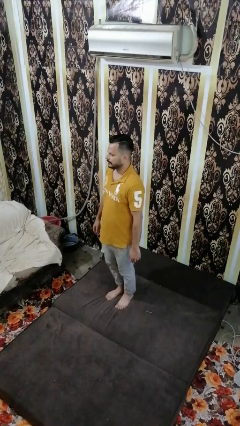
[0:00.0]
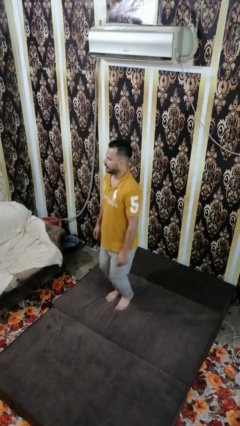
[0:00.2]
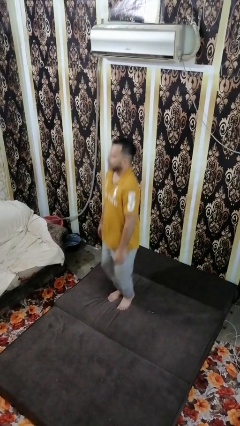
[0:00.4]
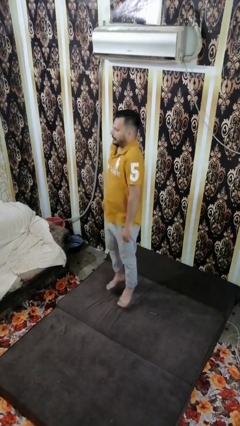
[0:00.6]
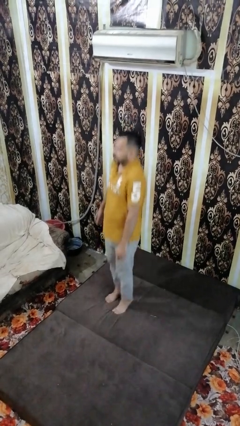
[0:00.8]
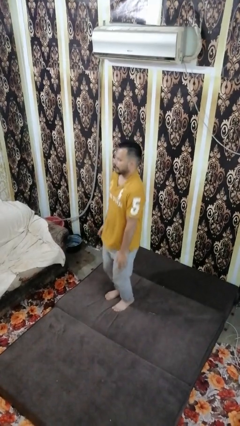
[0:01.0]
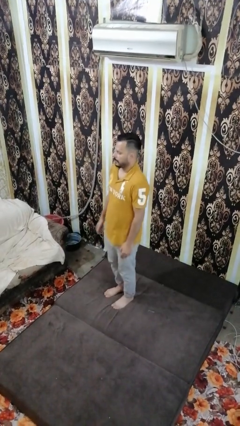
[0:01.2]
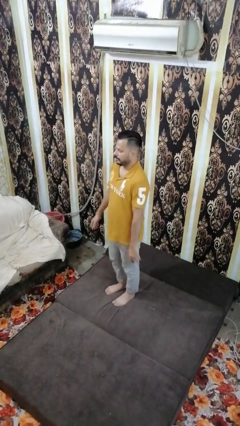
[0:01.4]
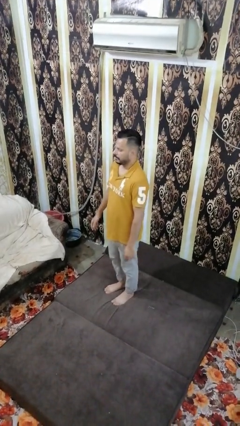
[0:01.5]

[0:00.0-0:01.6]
person jumps on bed

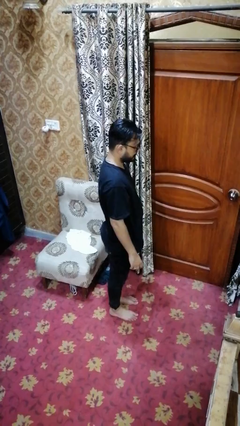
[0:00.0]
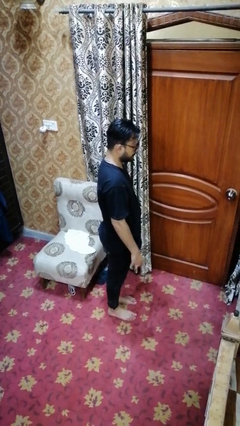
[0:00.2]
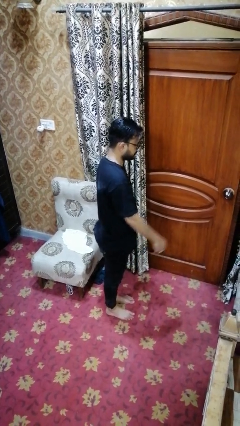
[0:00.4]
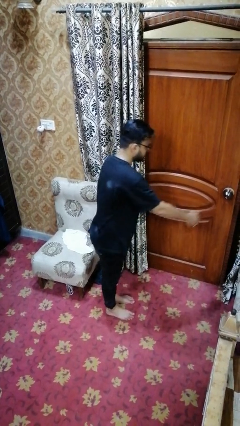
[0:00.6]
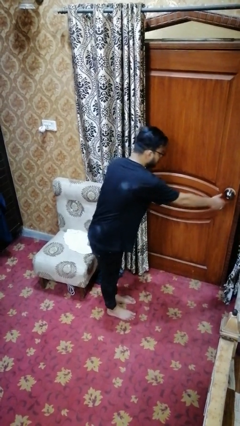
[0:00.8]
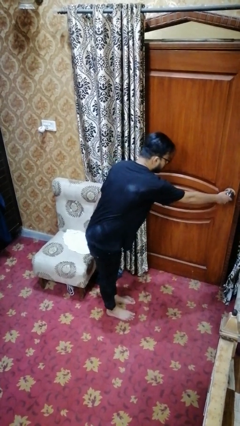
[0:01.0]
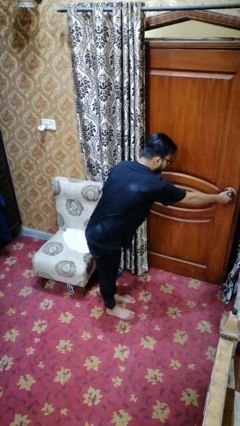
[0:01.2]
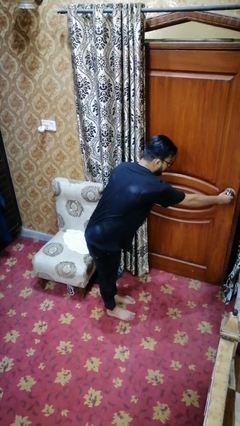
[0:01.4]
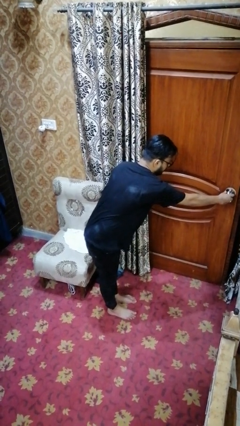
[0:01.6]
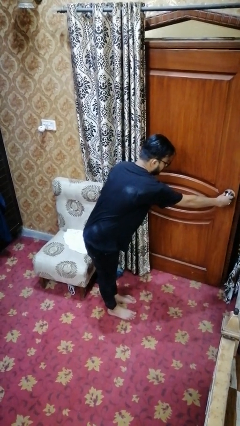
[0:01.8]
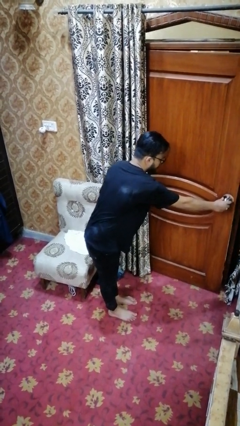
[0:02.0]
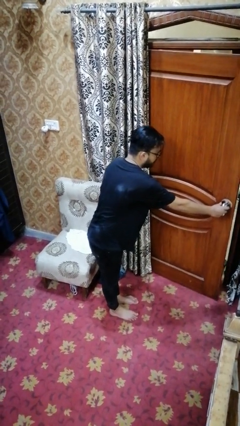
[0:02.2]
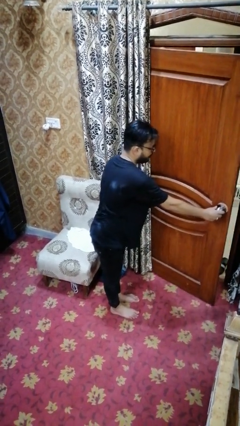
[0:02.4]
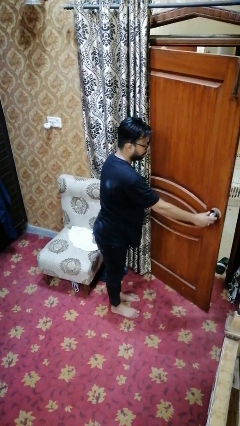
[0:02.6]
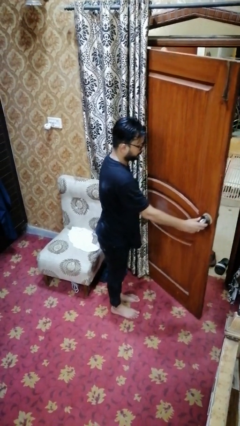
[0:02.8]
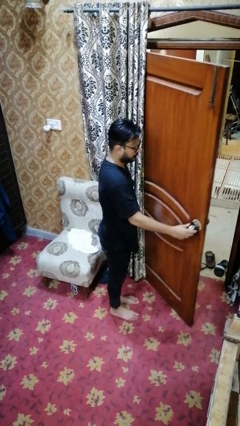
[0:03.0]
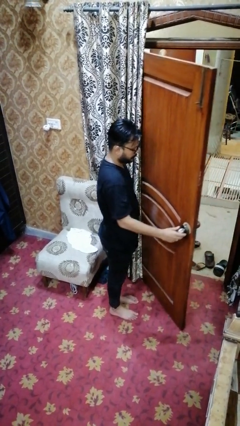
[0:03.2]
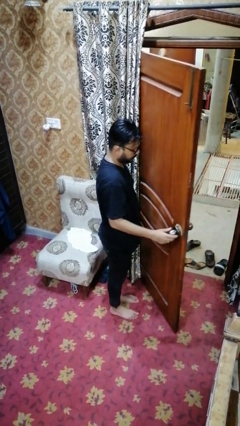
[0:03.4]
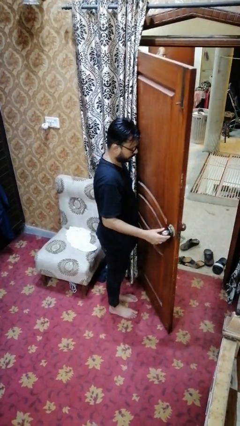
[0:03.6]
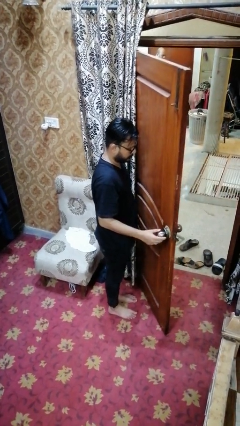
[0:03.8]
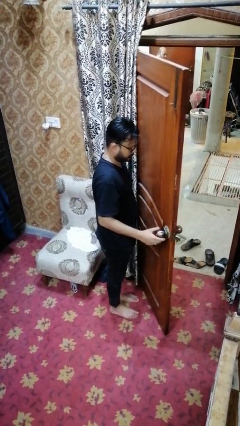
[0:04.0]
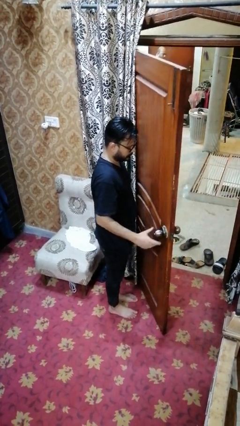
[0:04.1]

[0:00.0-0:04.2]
person opens facility door

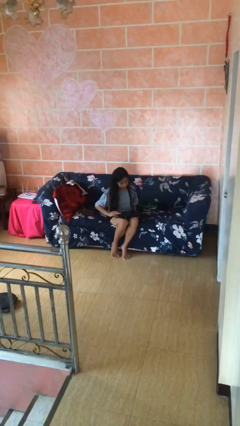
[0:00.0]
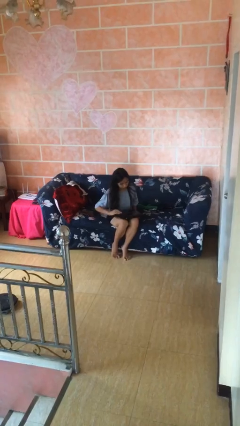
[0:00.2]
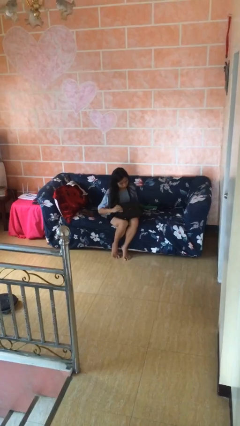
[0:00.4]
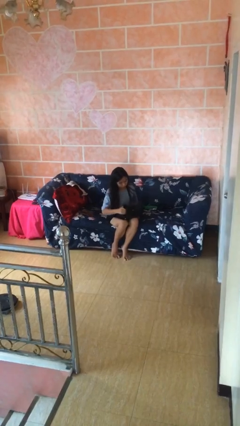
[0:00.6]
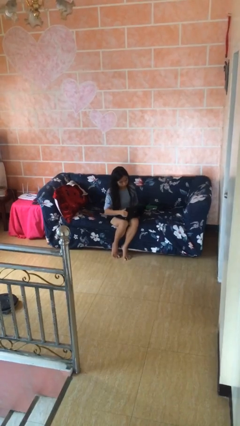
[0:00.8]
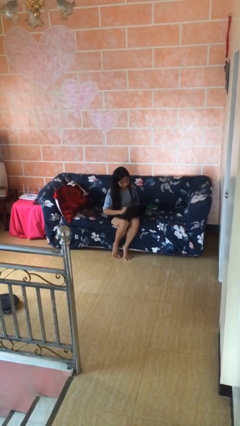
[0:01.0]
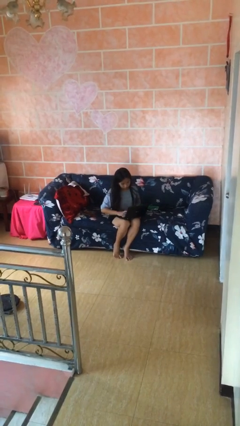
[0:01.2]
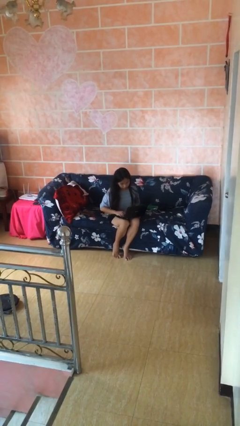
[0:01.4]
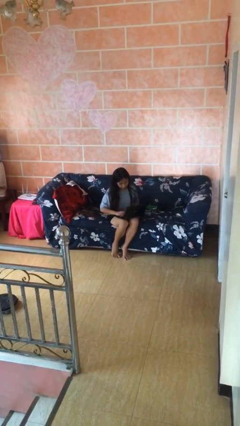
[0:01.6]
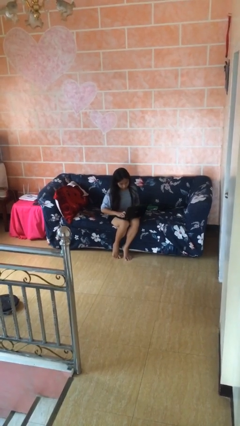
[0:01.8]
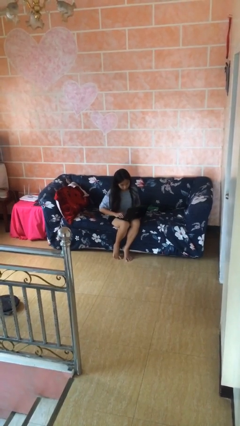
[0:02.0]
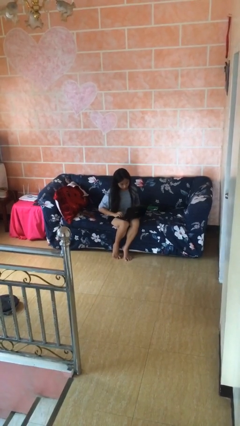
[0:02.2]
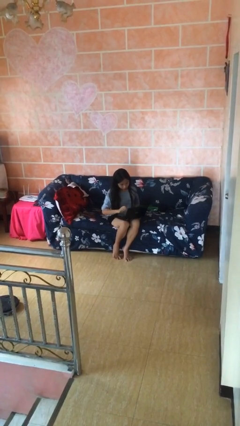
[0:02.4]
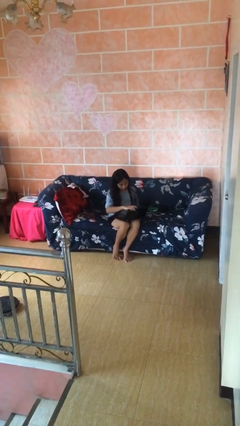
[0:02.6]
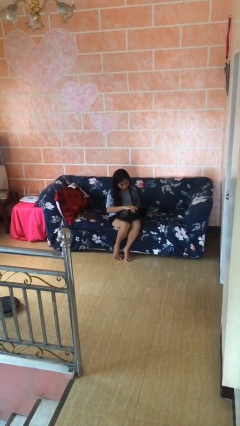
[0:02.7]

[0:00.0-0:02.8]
person interacts with laptop

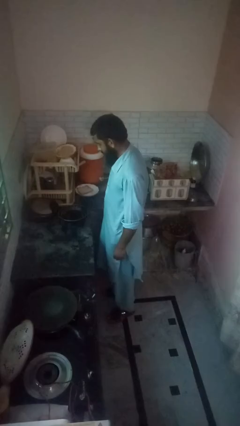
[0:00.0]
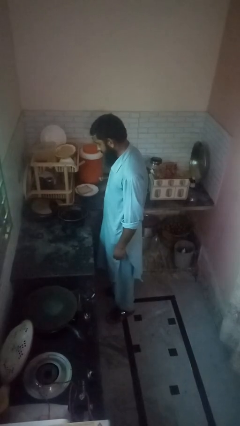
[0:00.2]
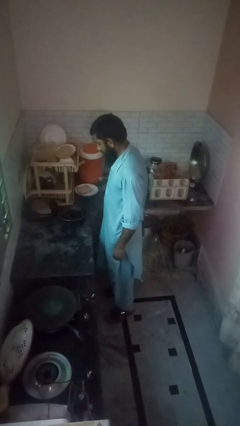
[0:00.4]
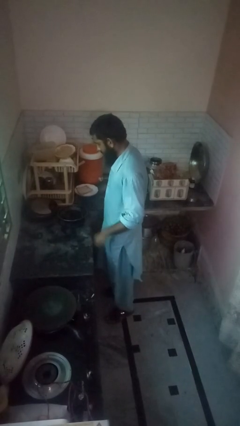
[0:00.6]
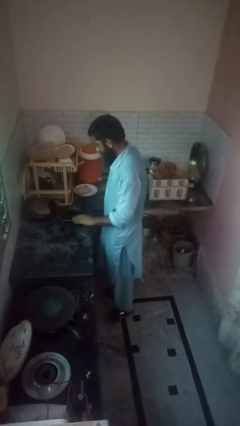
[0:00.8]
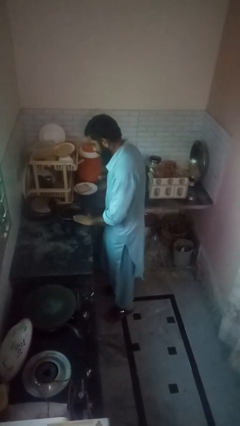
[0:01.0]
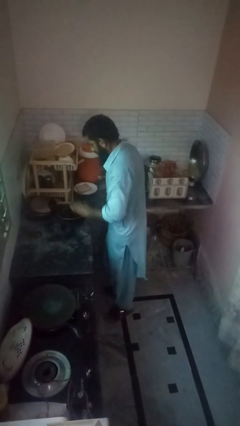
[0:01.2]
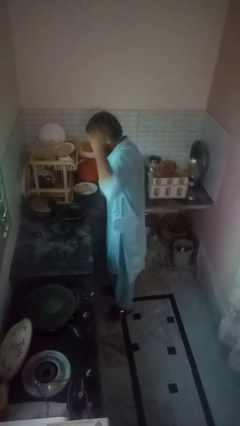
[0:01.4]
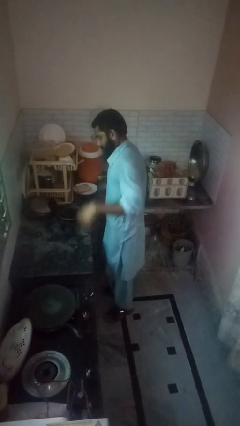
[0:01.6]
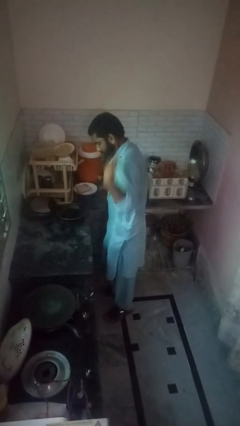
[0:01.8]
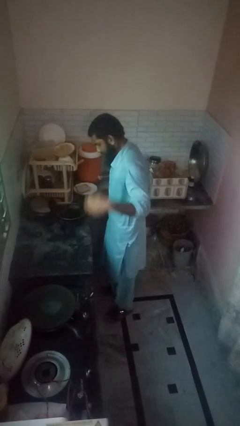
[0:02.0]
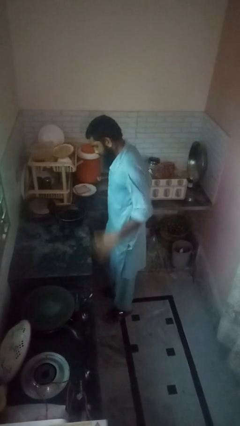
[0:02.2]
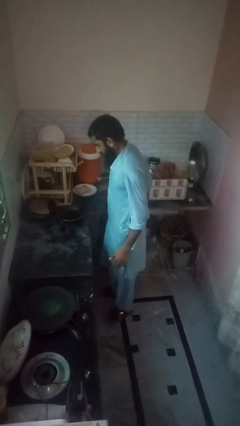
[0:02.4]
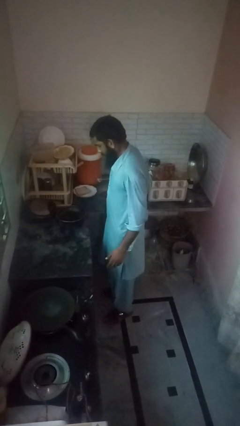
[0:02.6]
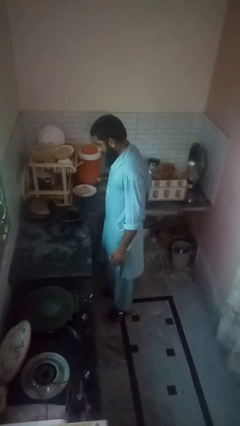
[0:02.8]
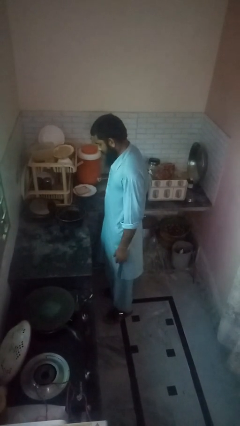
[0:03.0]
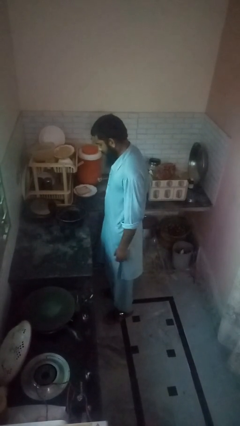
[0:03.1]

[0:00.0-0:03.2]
person burns hand

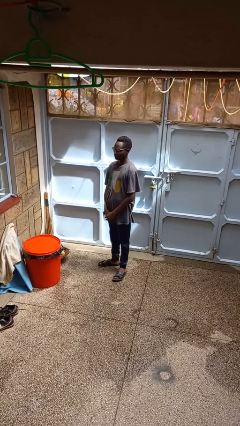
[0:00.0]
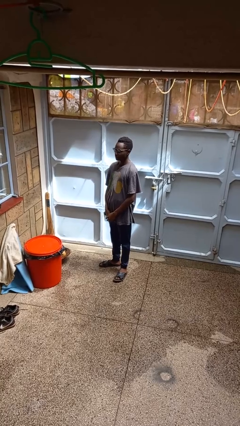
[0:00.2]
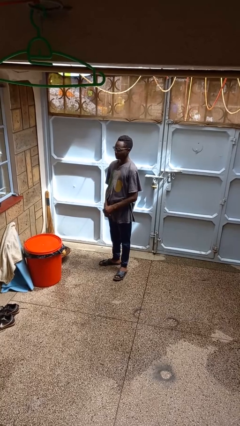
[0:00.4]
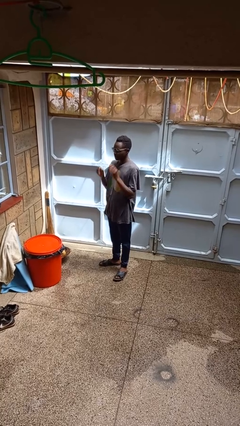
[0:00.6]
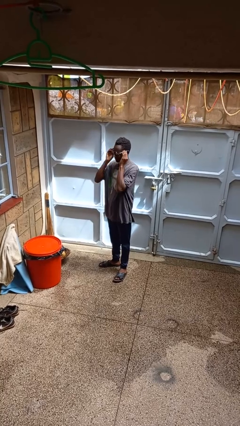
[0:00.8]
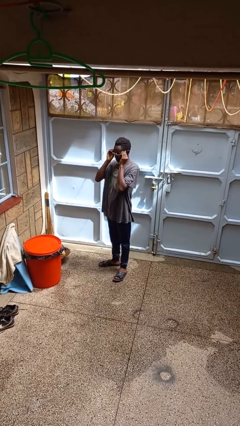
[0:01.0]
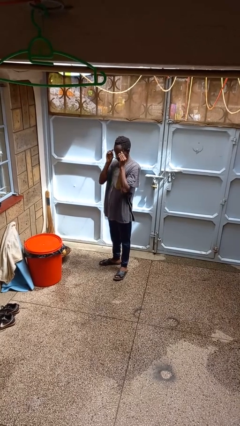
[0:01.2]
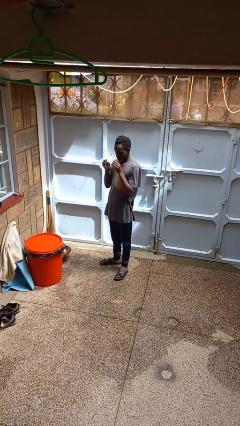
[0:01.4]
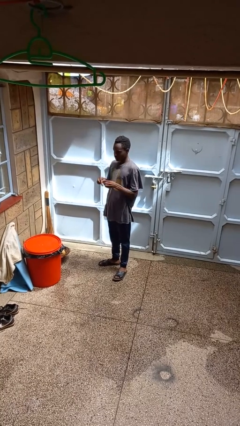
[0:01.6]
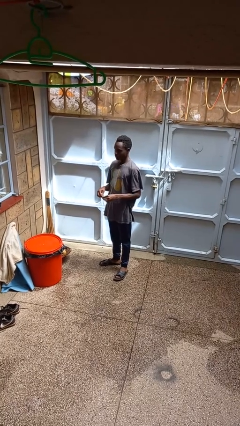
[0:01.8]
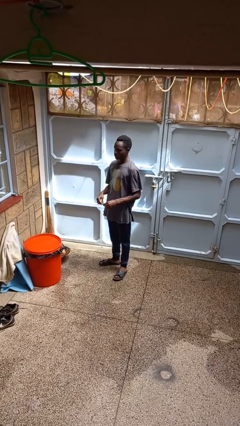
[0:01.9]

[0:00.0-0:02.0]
person takes off glasses

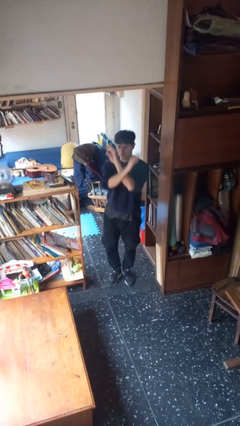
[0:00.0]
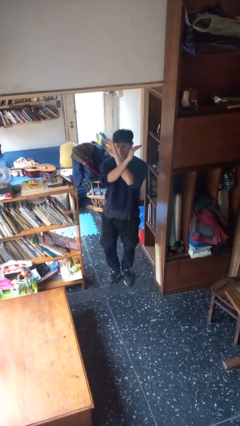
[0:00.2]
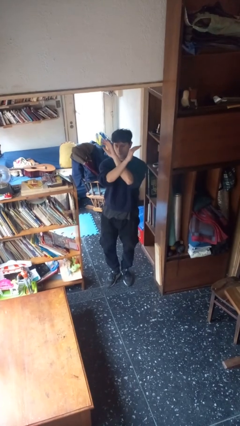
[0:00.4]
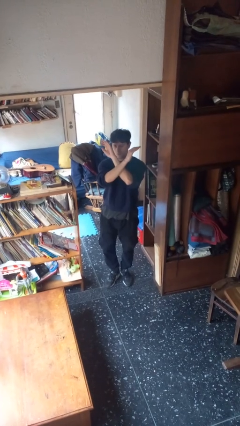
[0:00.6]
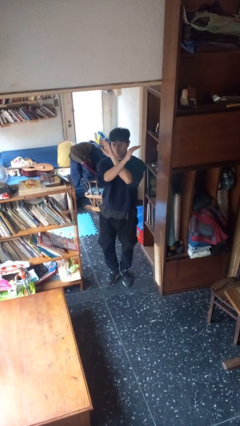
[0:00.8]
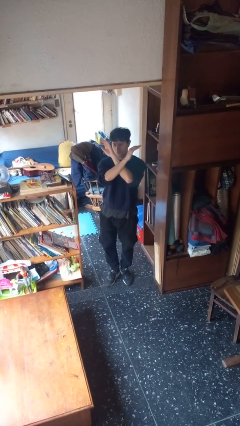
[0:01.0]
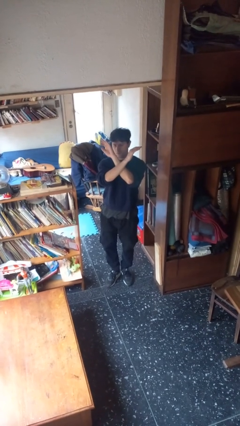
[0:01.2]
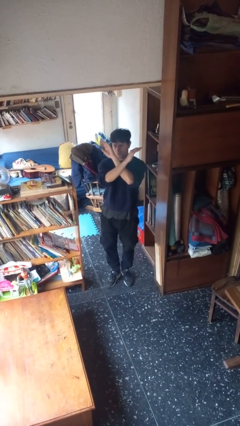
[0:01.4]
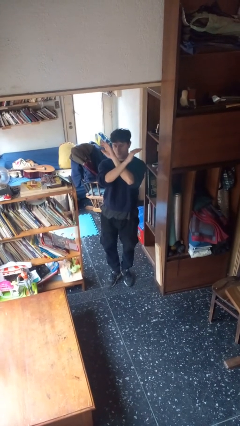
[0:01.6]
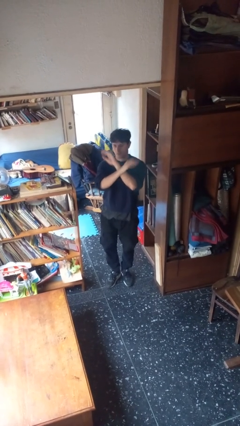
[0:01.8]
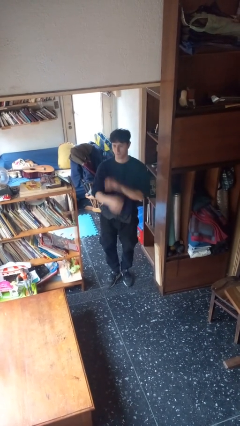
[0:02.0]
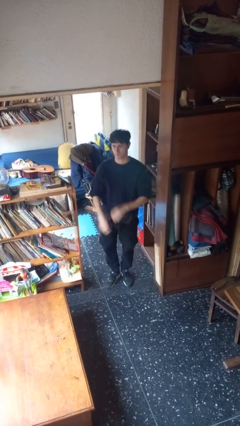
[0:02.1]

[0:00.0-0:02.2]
person gestures arms x

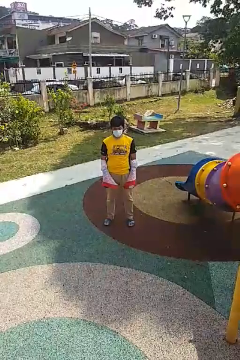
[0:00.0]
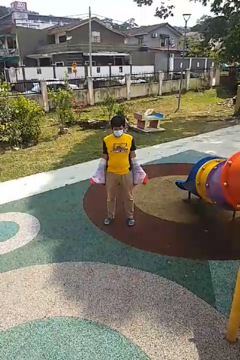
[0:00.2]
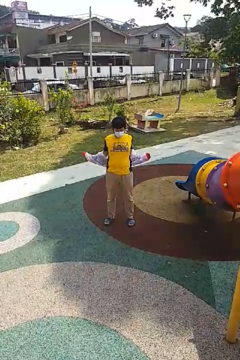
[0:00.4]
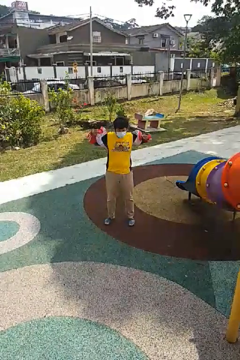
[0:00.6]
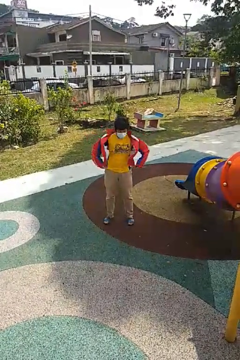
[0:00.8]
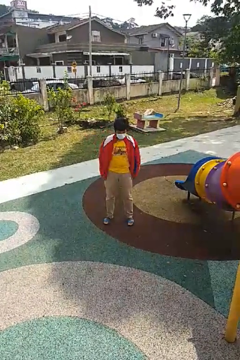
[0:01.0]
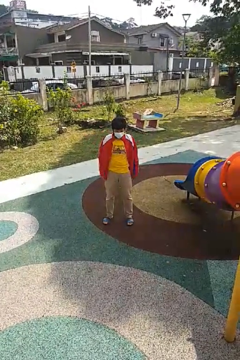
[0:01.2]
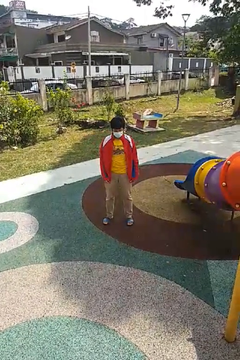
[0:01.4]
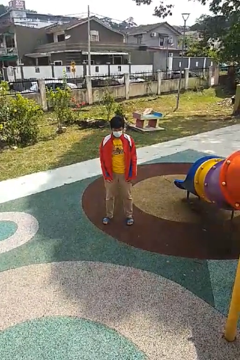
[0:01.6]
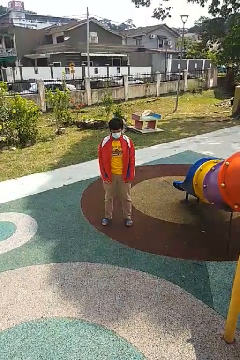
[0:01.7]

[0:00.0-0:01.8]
person puts on jacket
